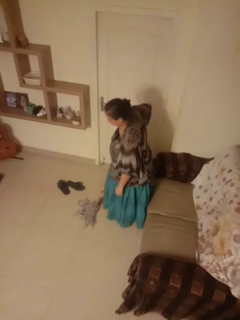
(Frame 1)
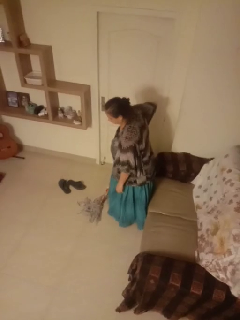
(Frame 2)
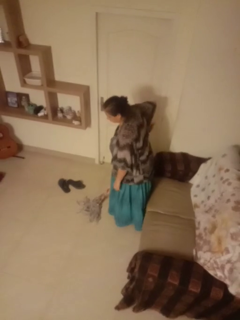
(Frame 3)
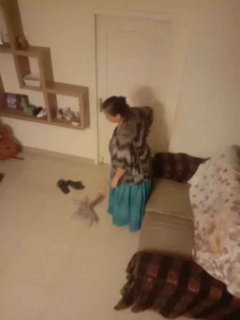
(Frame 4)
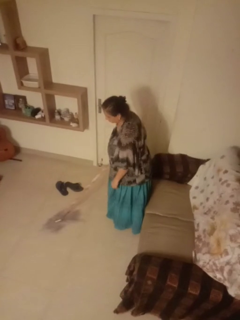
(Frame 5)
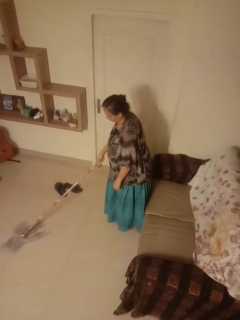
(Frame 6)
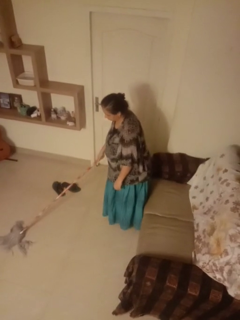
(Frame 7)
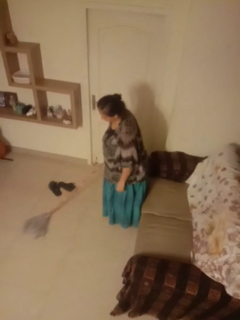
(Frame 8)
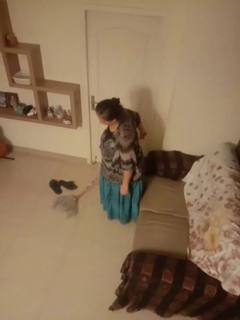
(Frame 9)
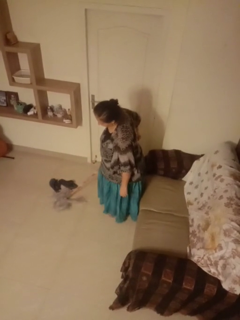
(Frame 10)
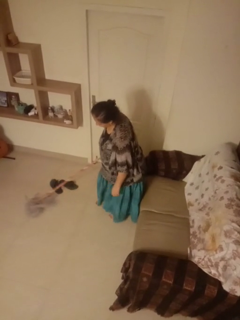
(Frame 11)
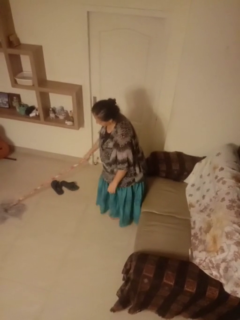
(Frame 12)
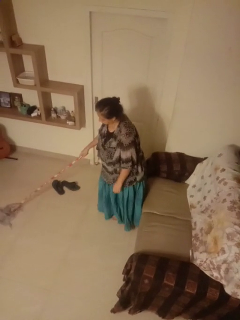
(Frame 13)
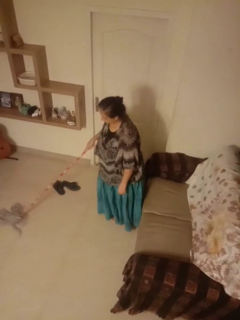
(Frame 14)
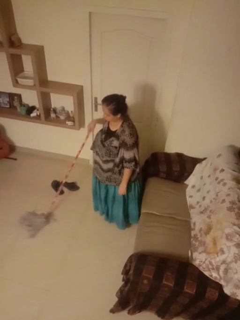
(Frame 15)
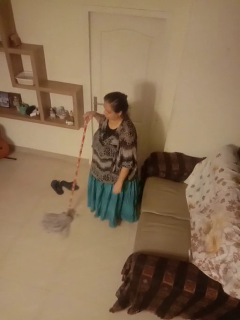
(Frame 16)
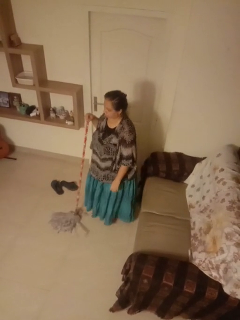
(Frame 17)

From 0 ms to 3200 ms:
person mops

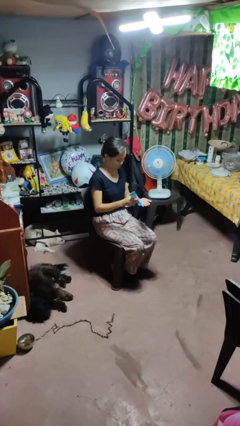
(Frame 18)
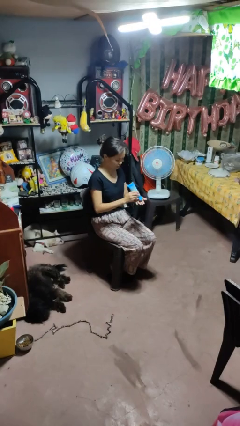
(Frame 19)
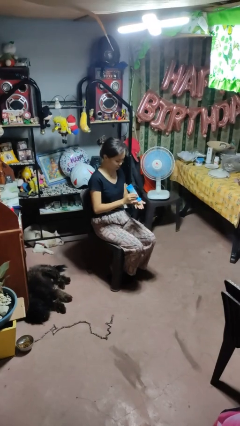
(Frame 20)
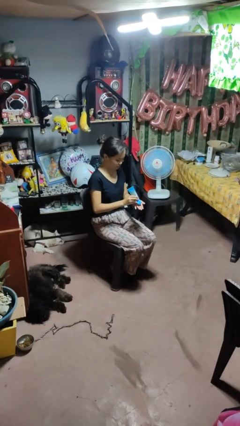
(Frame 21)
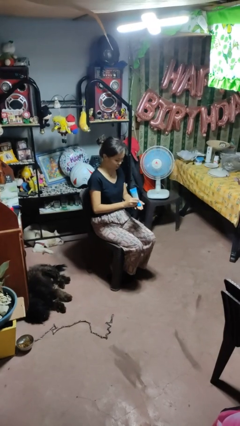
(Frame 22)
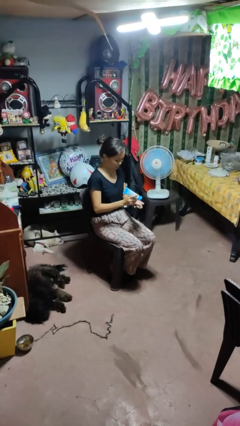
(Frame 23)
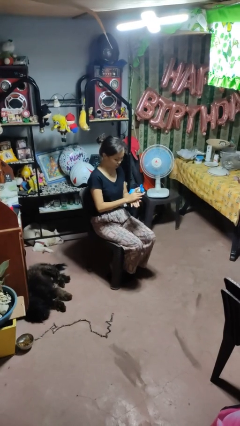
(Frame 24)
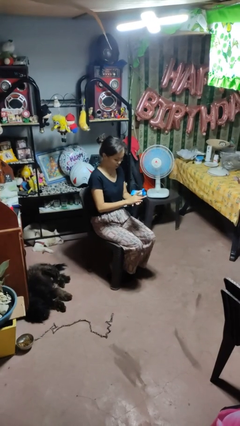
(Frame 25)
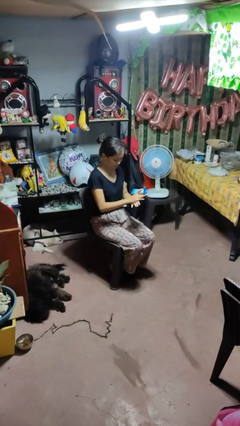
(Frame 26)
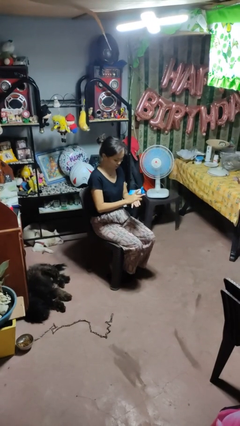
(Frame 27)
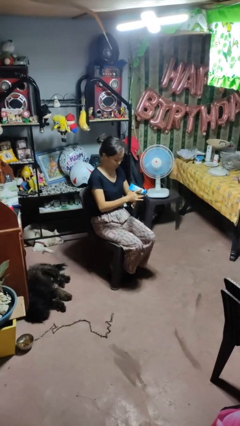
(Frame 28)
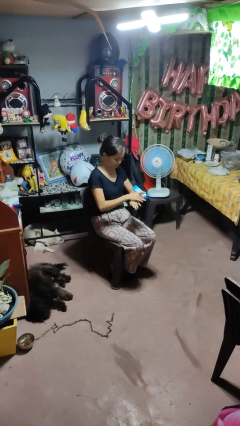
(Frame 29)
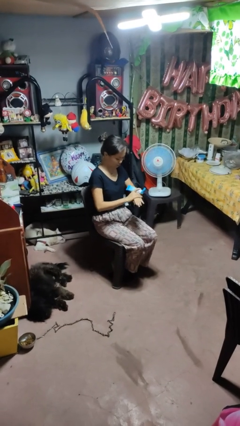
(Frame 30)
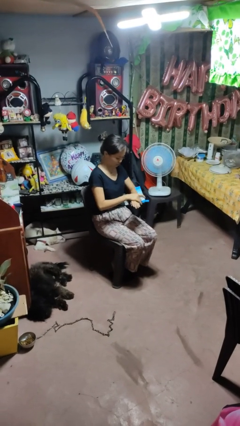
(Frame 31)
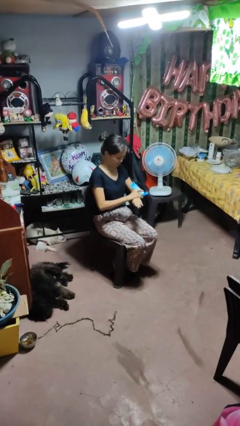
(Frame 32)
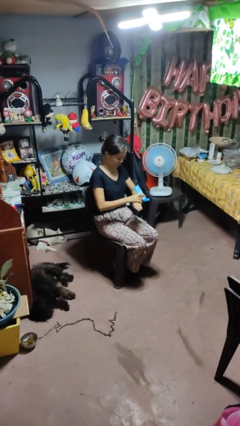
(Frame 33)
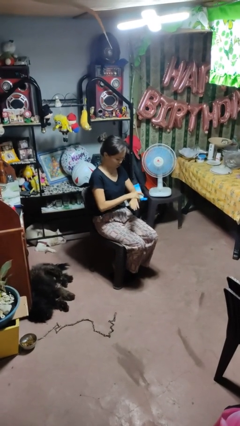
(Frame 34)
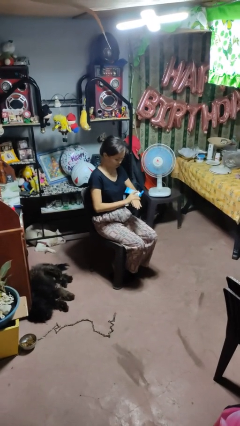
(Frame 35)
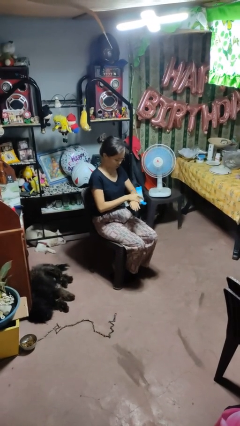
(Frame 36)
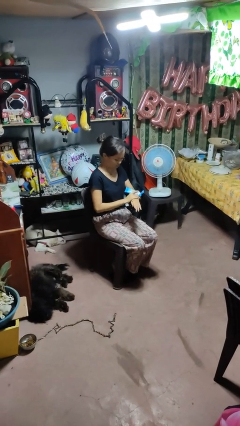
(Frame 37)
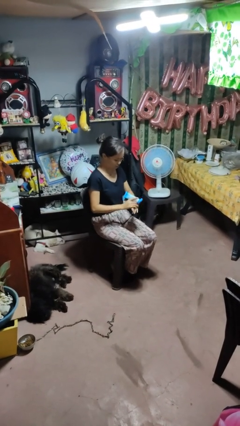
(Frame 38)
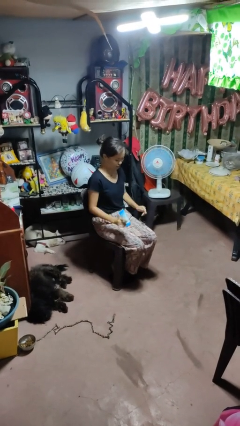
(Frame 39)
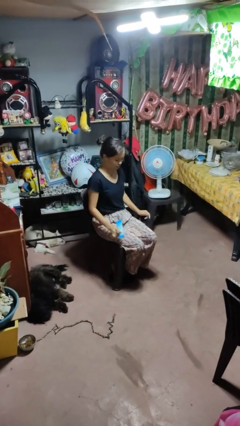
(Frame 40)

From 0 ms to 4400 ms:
person applies sunscreen

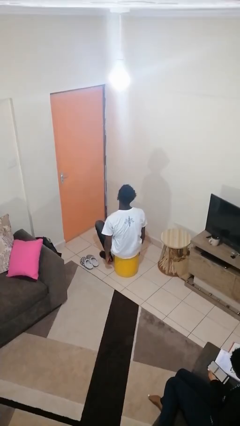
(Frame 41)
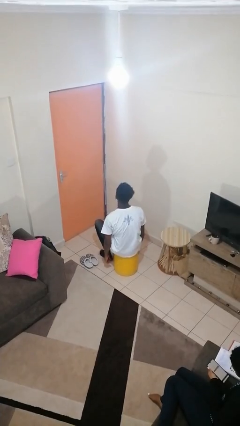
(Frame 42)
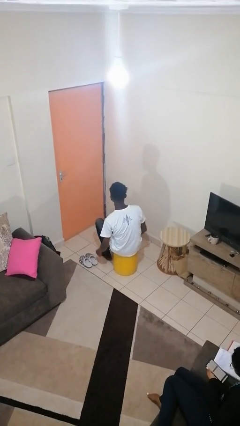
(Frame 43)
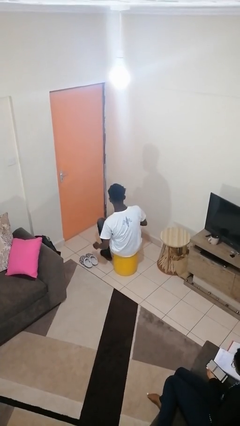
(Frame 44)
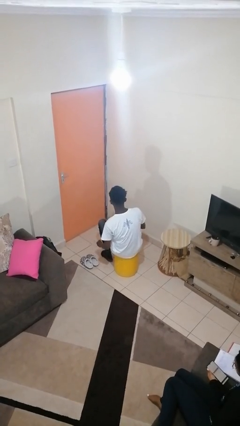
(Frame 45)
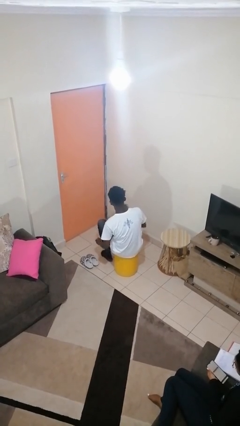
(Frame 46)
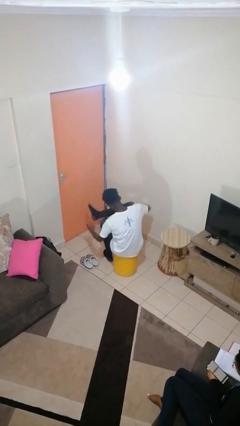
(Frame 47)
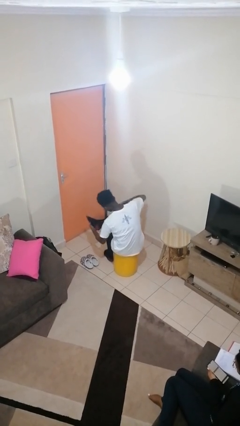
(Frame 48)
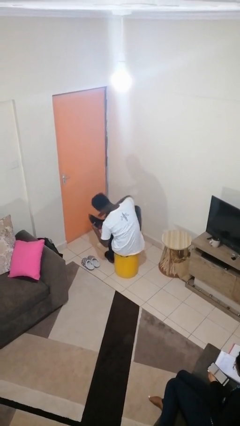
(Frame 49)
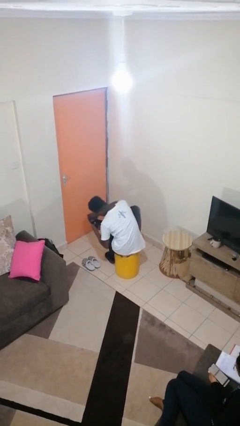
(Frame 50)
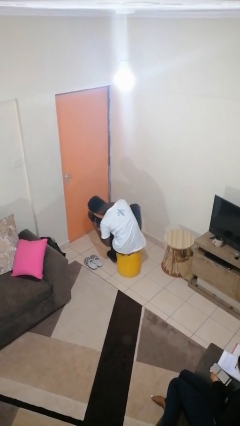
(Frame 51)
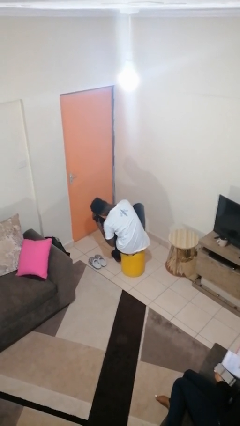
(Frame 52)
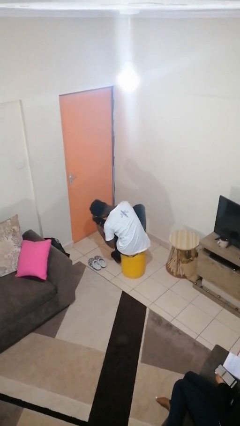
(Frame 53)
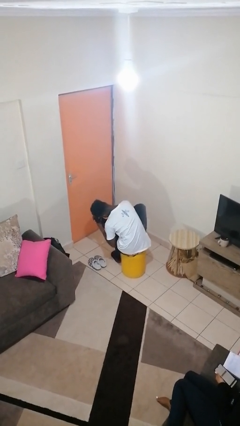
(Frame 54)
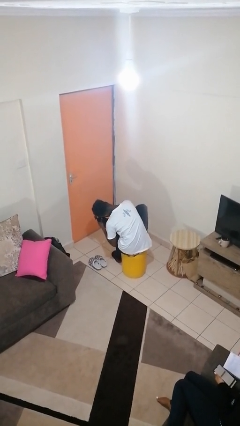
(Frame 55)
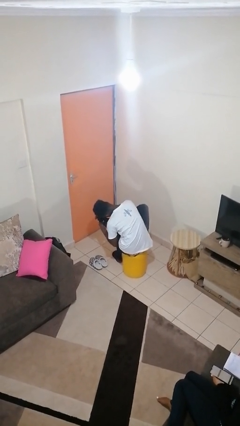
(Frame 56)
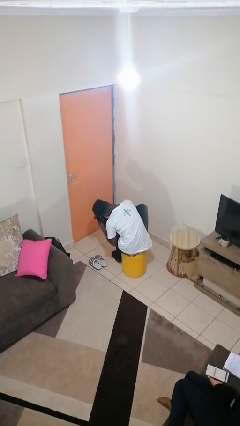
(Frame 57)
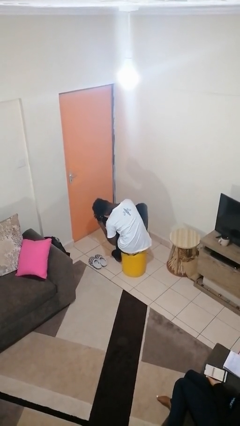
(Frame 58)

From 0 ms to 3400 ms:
person rubs foot

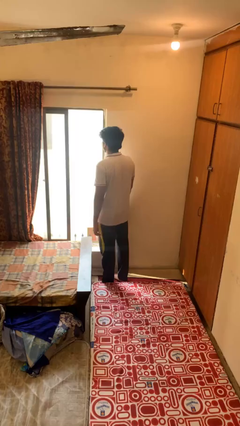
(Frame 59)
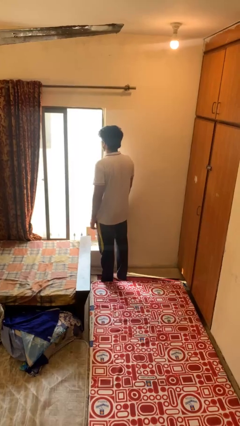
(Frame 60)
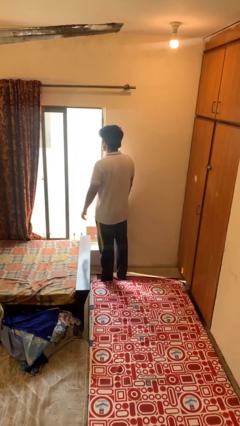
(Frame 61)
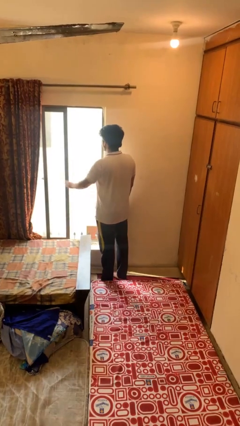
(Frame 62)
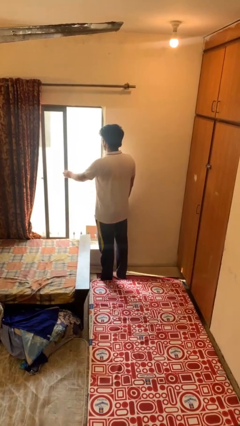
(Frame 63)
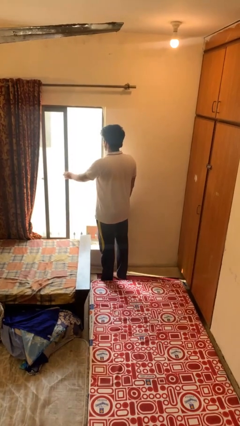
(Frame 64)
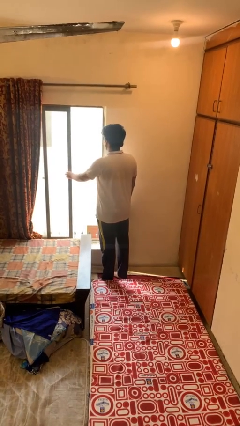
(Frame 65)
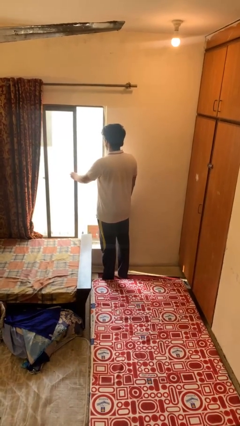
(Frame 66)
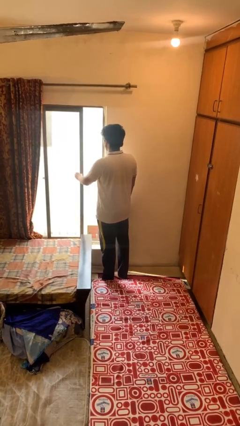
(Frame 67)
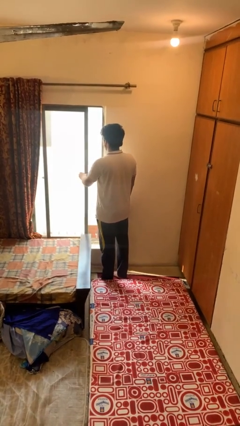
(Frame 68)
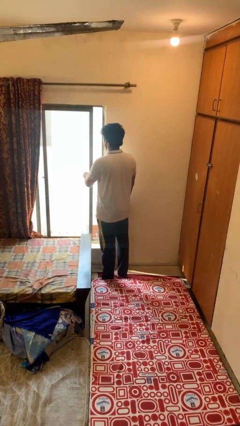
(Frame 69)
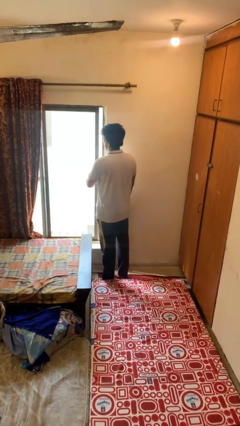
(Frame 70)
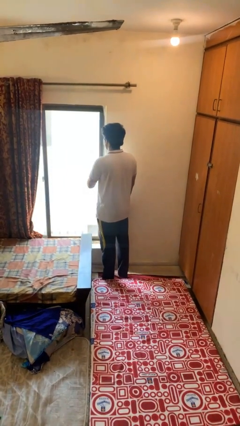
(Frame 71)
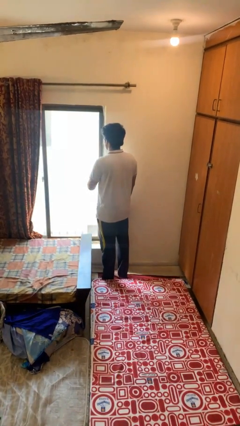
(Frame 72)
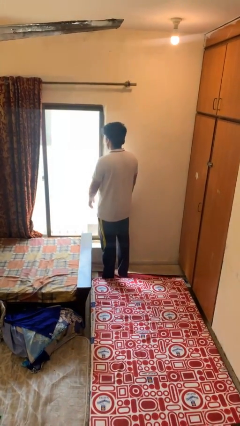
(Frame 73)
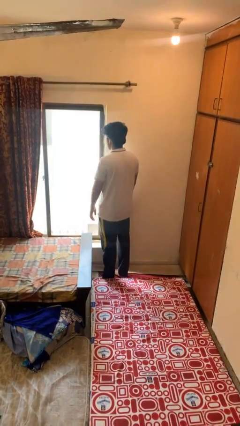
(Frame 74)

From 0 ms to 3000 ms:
person closes home window

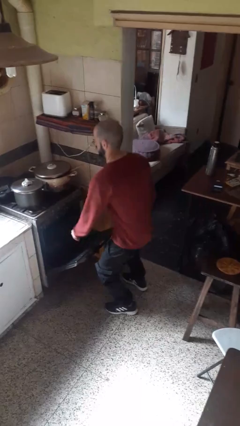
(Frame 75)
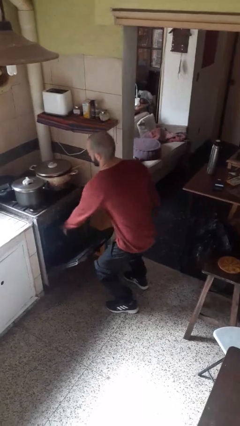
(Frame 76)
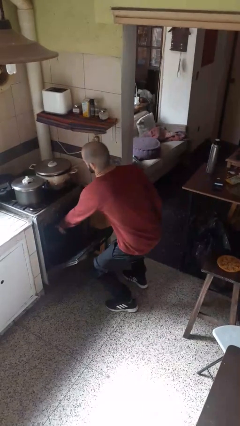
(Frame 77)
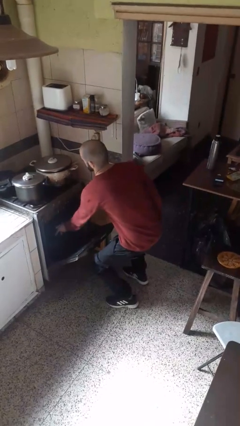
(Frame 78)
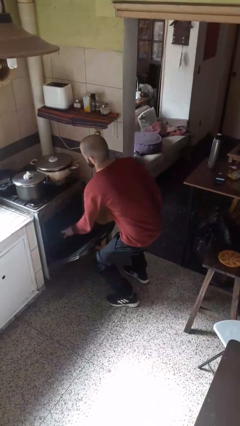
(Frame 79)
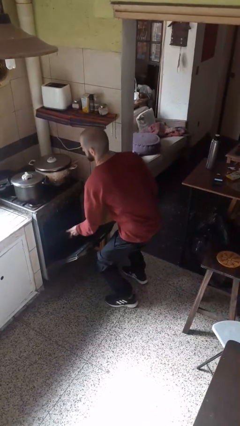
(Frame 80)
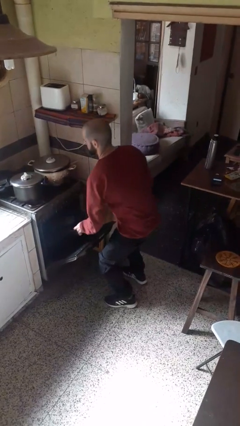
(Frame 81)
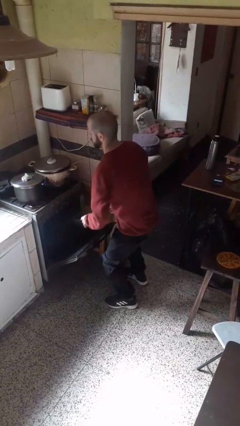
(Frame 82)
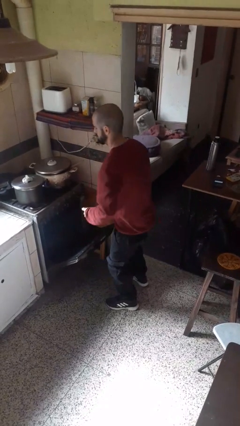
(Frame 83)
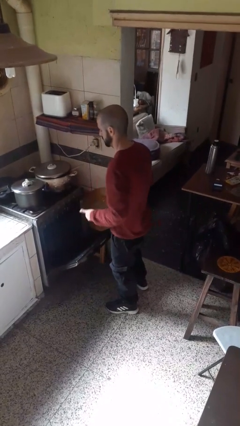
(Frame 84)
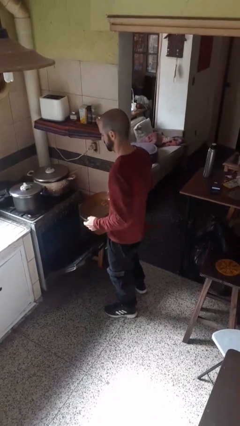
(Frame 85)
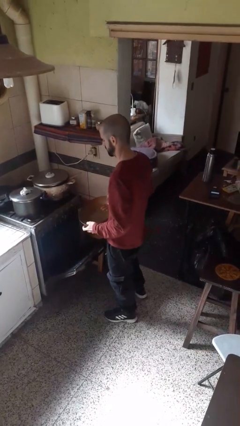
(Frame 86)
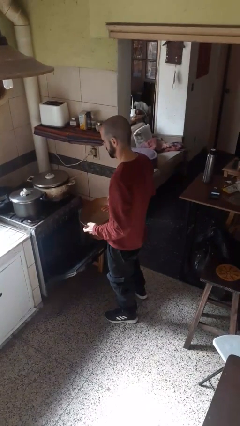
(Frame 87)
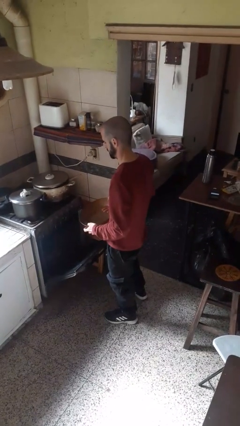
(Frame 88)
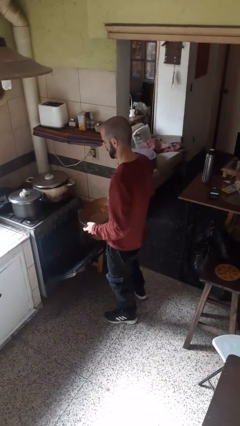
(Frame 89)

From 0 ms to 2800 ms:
person takes object from oven

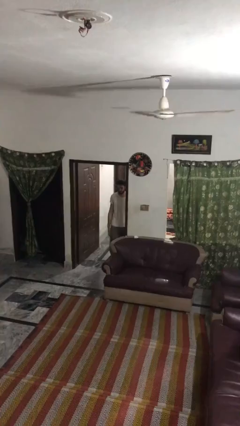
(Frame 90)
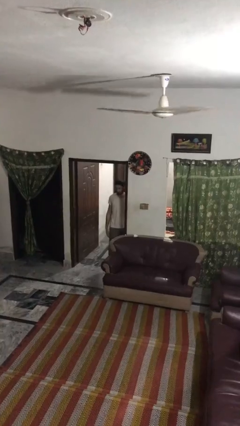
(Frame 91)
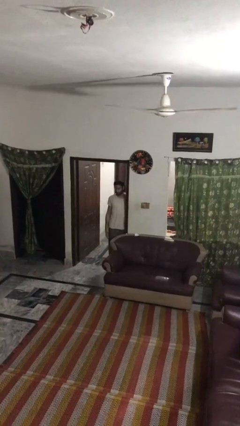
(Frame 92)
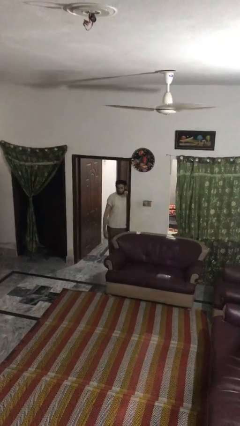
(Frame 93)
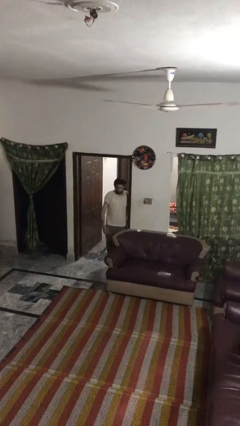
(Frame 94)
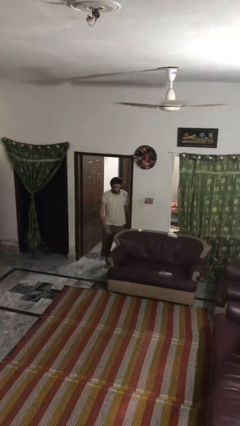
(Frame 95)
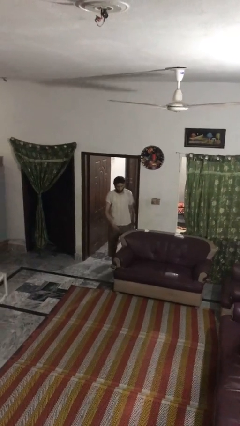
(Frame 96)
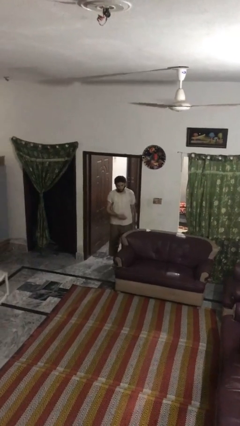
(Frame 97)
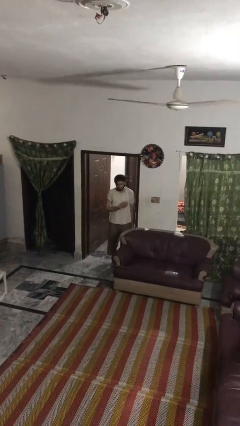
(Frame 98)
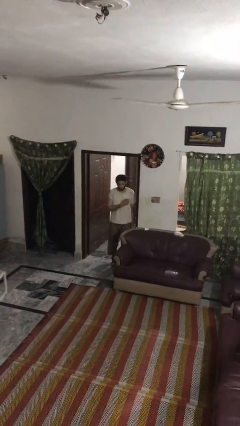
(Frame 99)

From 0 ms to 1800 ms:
person bumps into wall
